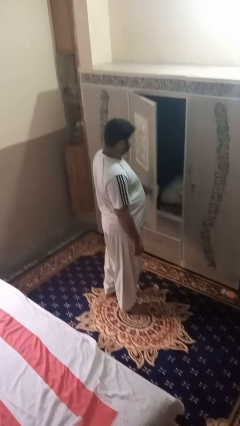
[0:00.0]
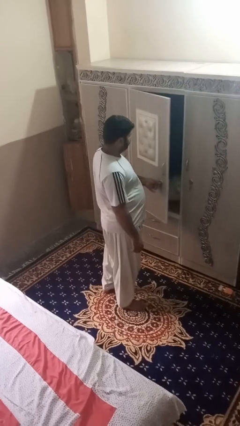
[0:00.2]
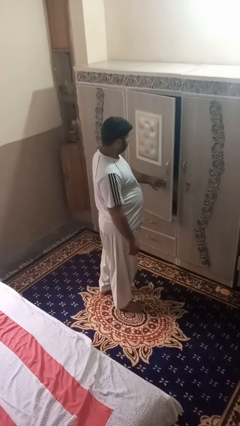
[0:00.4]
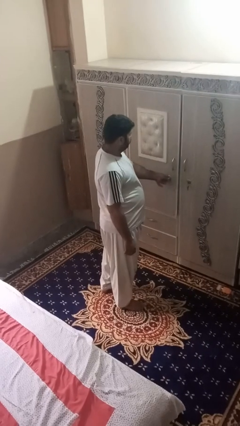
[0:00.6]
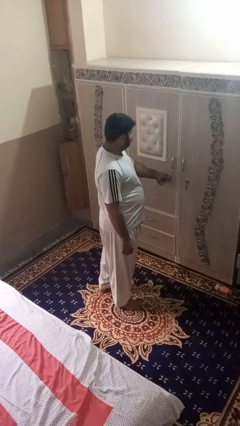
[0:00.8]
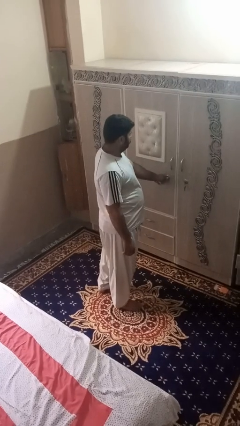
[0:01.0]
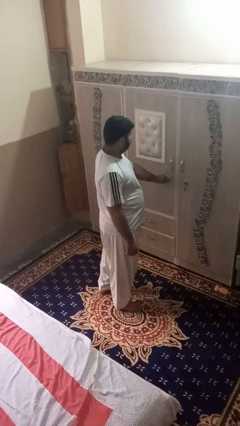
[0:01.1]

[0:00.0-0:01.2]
person closes dresser drawer

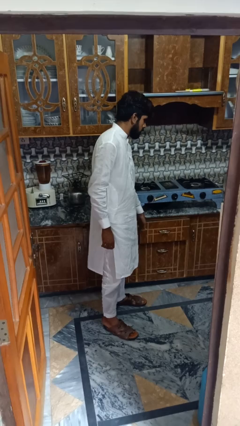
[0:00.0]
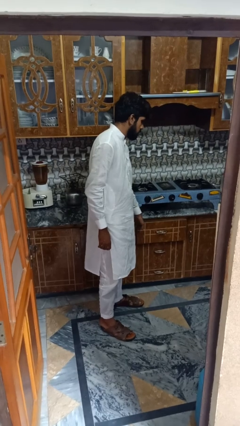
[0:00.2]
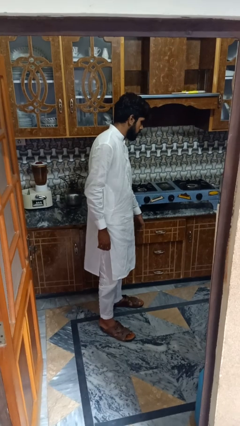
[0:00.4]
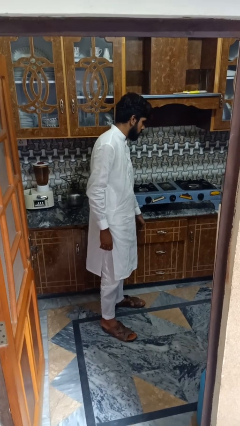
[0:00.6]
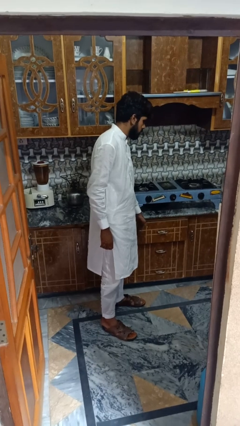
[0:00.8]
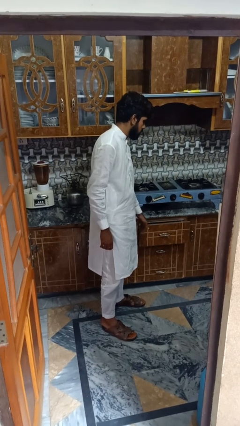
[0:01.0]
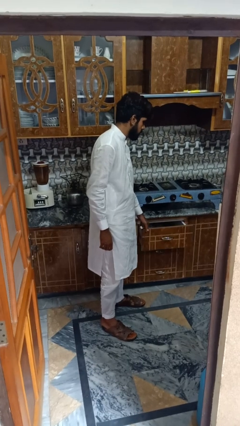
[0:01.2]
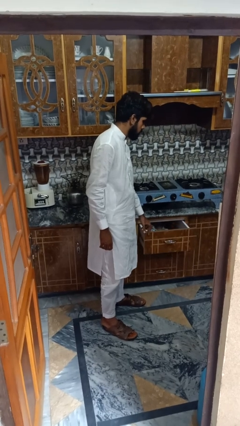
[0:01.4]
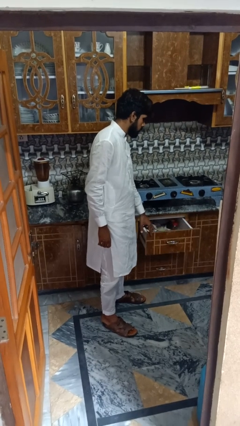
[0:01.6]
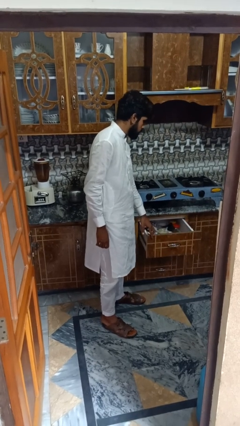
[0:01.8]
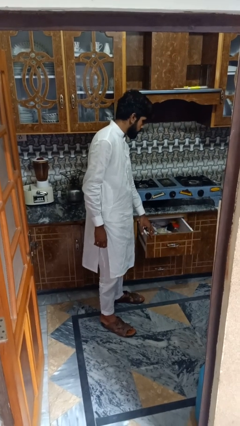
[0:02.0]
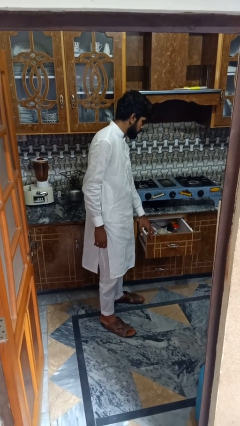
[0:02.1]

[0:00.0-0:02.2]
person opens kitchen drawer

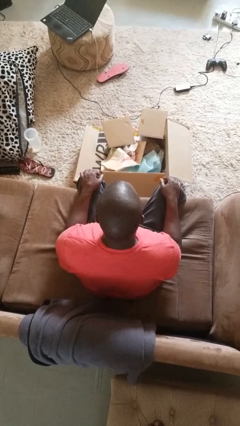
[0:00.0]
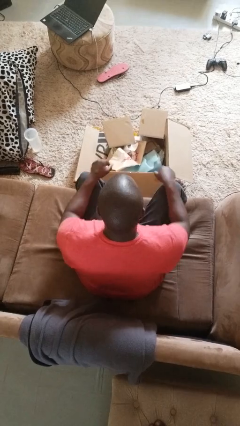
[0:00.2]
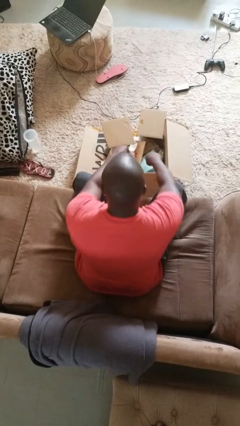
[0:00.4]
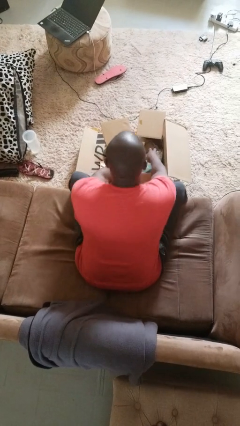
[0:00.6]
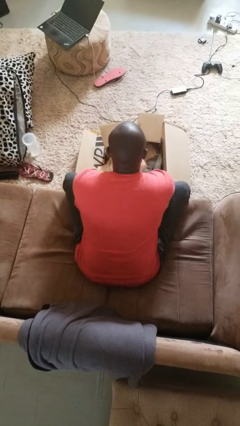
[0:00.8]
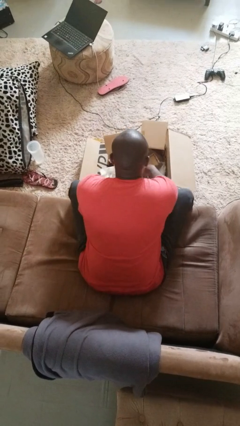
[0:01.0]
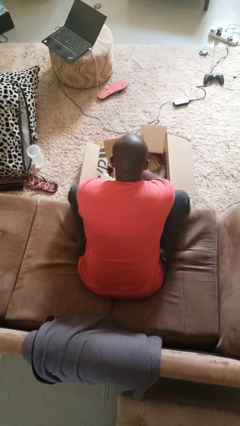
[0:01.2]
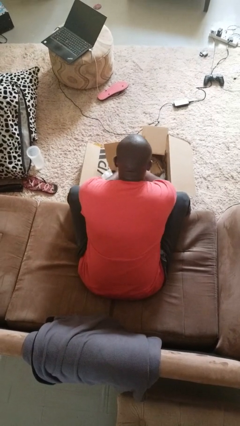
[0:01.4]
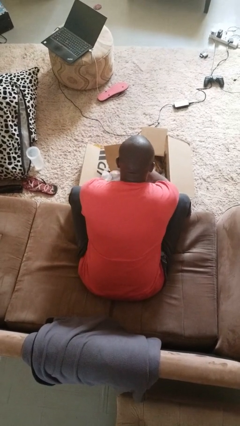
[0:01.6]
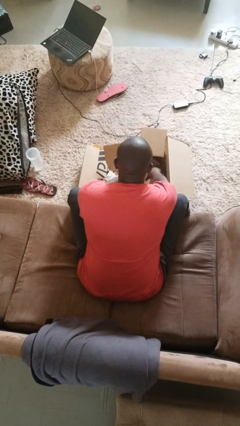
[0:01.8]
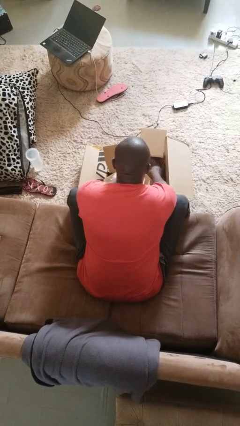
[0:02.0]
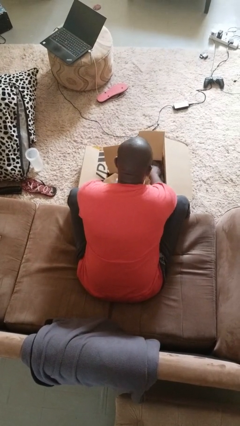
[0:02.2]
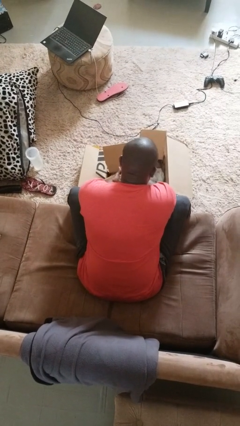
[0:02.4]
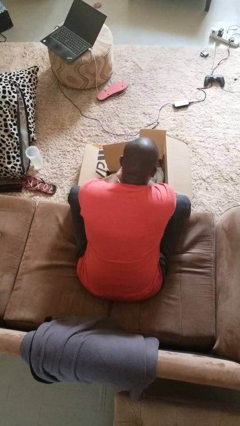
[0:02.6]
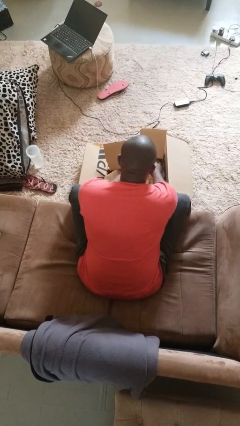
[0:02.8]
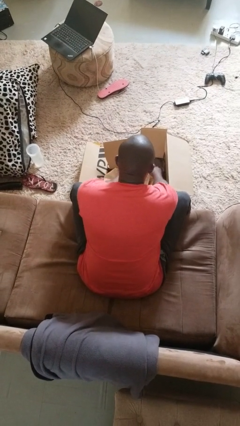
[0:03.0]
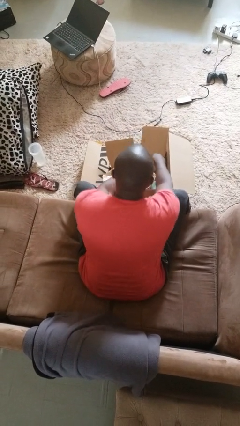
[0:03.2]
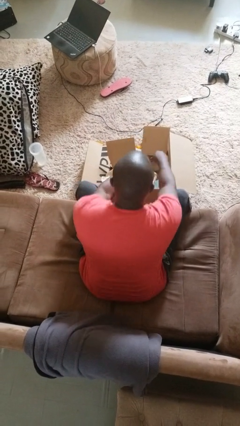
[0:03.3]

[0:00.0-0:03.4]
person searches in box

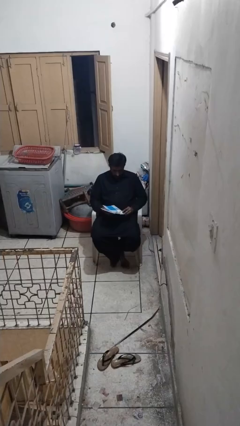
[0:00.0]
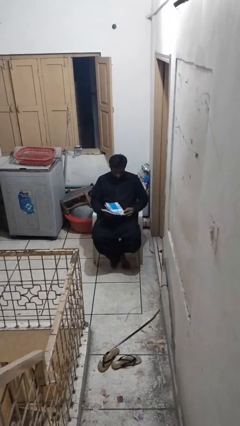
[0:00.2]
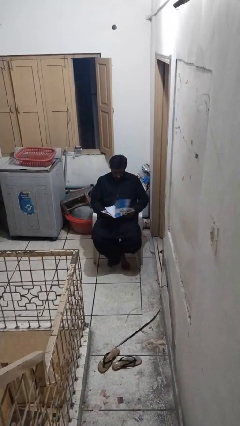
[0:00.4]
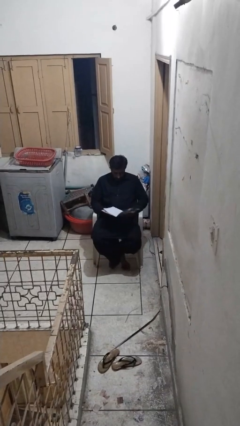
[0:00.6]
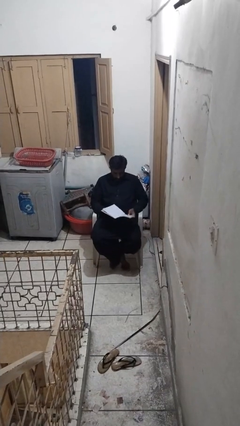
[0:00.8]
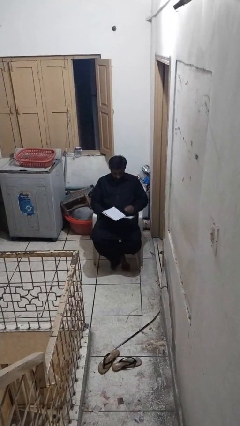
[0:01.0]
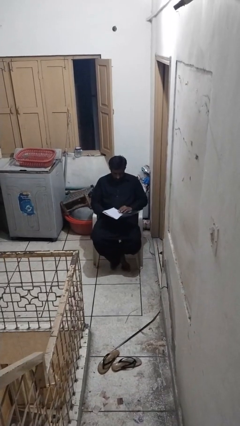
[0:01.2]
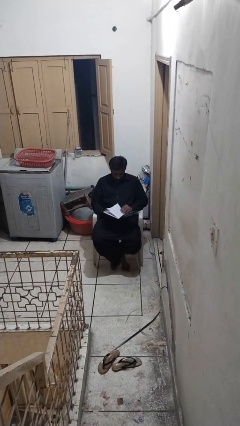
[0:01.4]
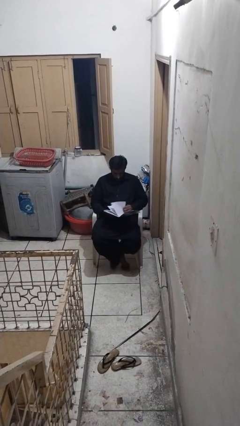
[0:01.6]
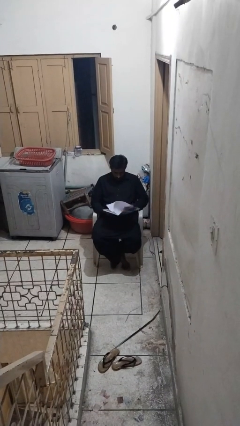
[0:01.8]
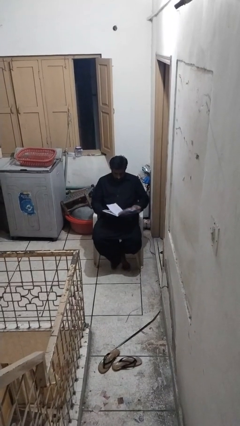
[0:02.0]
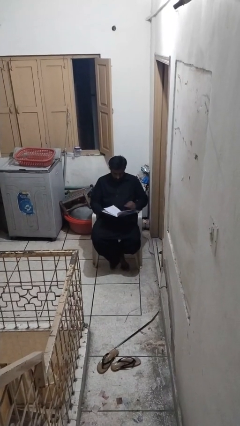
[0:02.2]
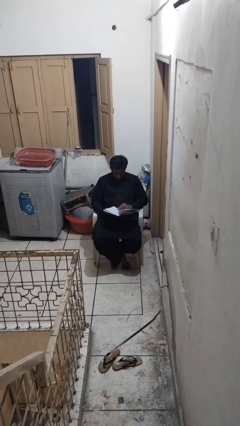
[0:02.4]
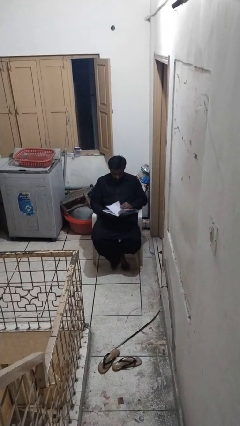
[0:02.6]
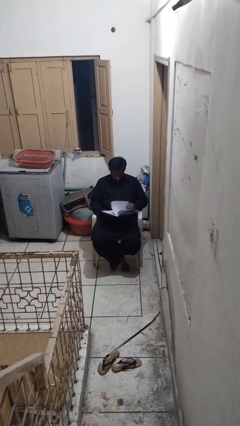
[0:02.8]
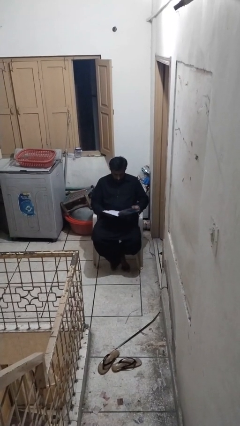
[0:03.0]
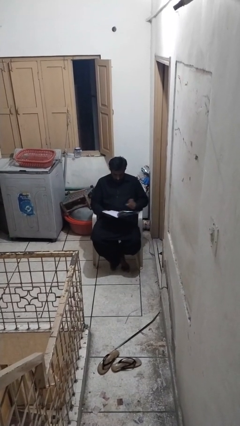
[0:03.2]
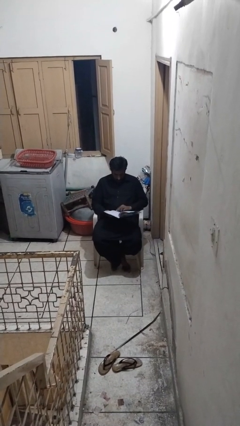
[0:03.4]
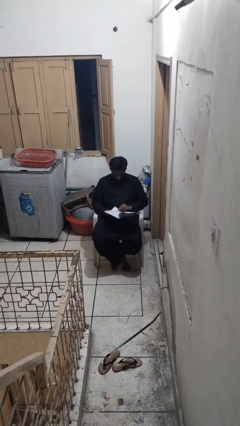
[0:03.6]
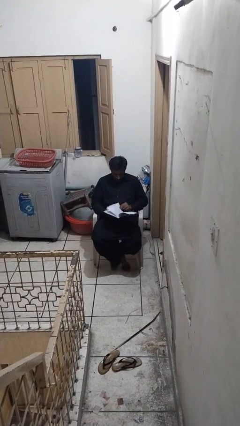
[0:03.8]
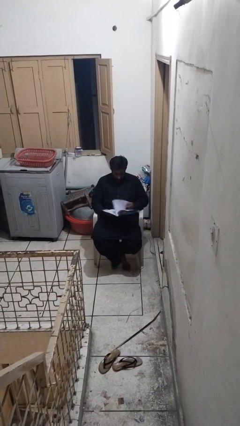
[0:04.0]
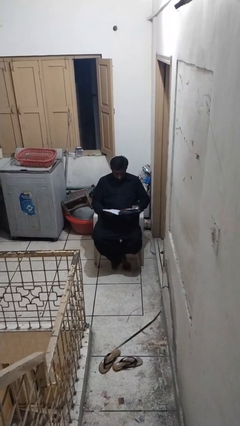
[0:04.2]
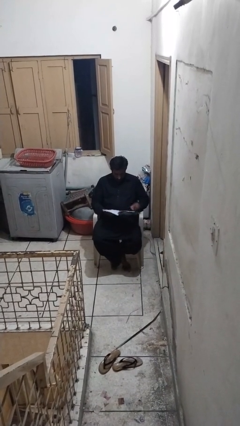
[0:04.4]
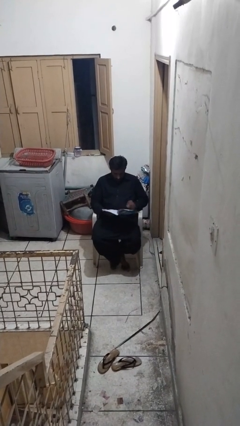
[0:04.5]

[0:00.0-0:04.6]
person reads book

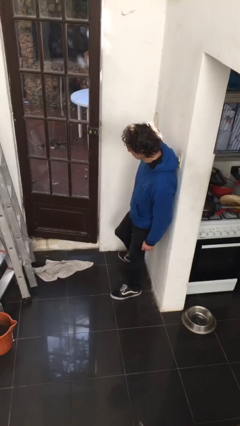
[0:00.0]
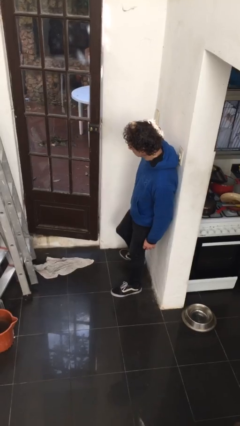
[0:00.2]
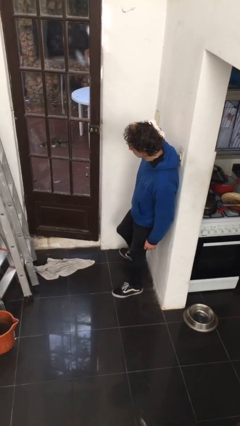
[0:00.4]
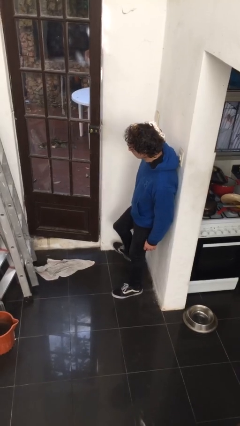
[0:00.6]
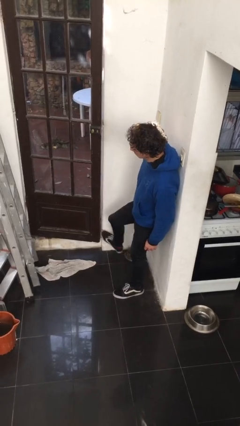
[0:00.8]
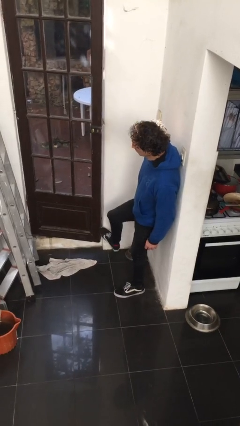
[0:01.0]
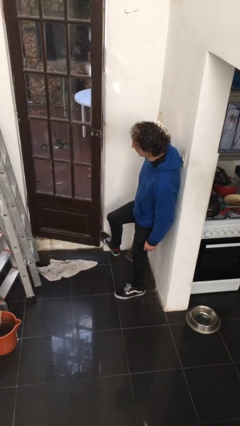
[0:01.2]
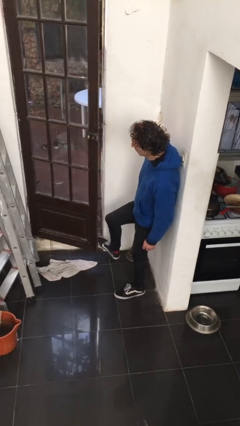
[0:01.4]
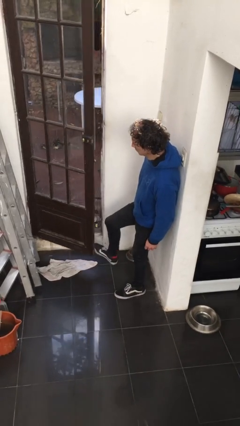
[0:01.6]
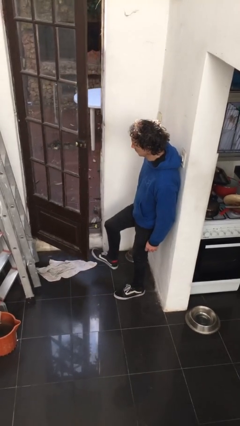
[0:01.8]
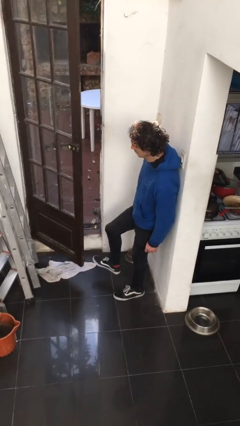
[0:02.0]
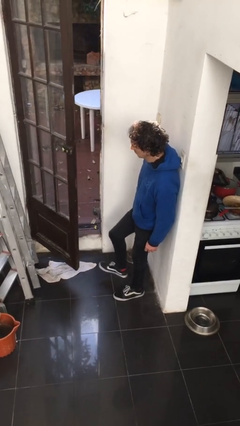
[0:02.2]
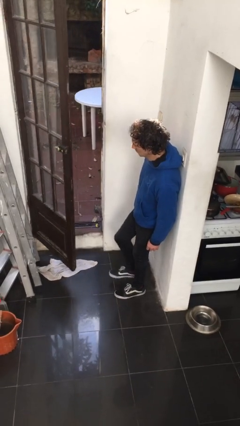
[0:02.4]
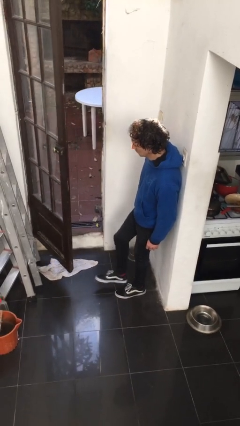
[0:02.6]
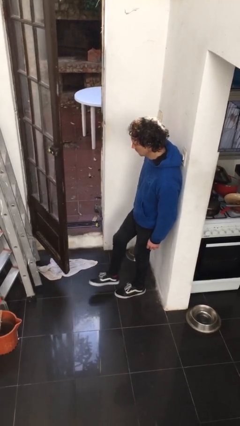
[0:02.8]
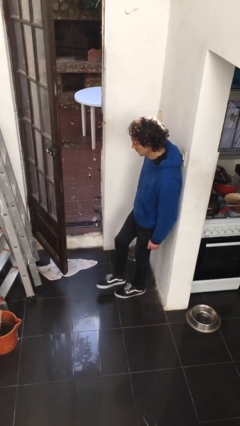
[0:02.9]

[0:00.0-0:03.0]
person opens facility door

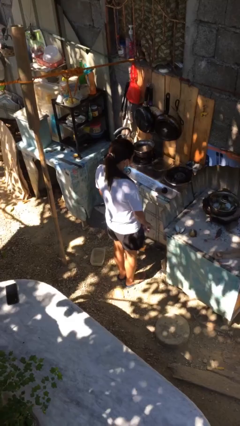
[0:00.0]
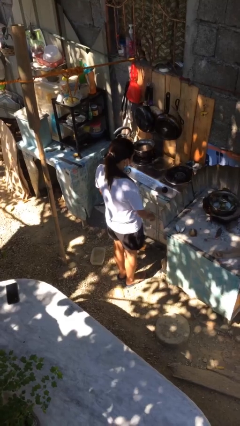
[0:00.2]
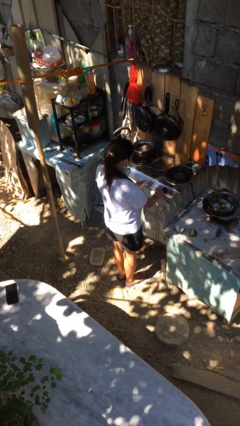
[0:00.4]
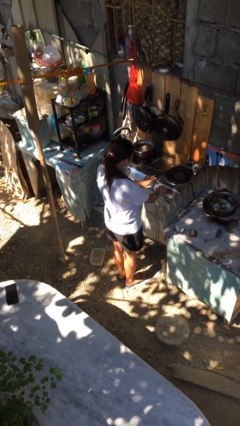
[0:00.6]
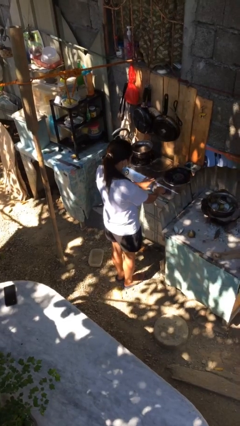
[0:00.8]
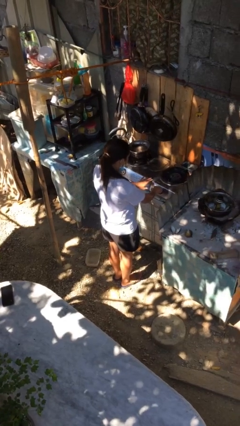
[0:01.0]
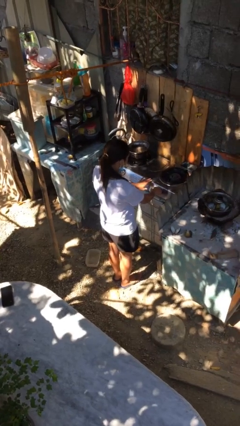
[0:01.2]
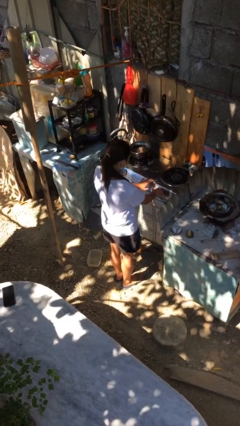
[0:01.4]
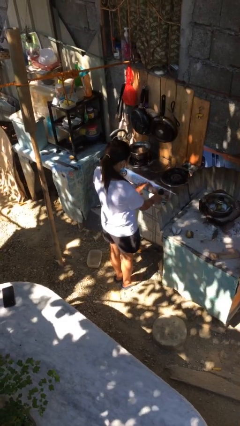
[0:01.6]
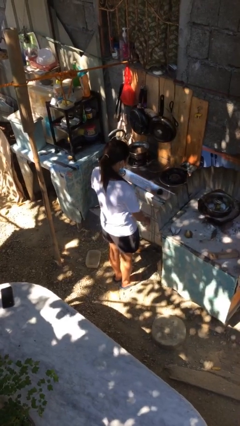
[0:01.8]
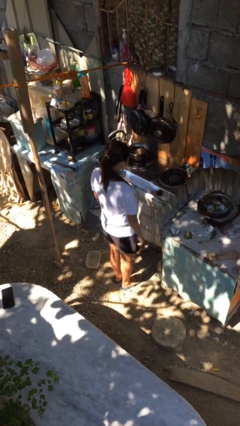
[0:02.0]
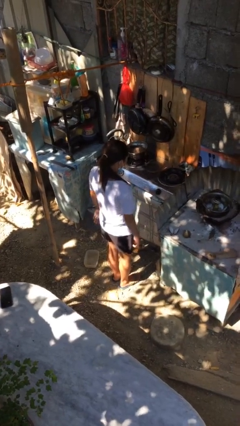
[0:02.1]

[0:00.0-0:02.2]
person turns off stovetop

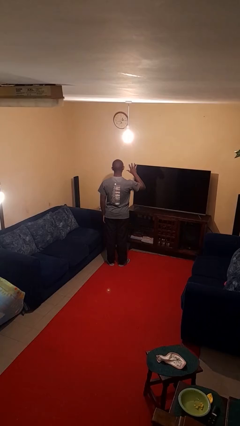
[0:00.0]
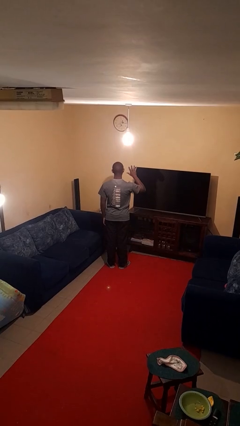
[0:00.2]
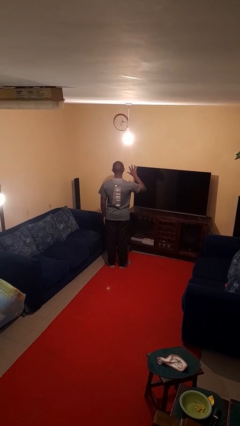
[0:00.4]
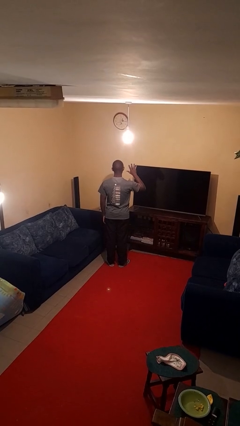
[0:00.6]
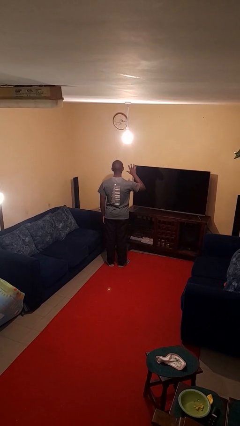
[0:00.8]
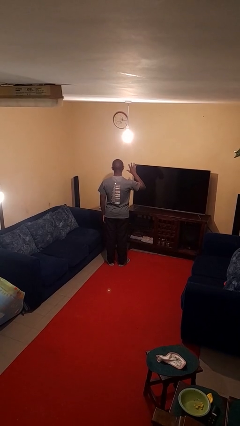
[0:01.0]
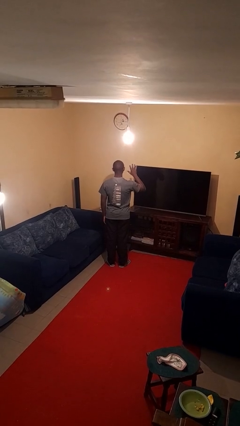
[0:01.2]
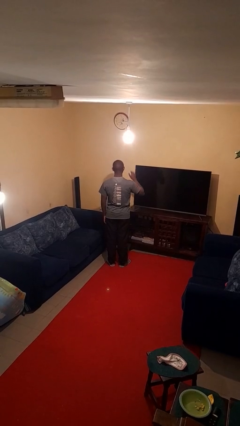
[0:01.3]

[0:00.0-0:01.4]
person gestures number five
